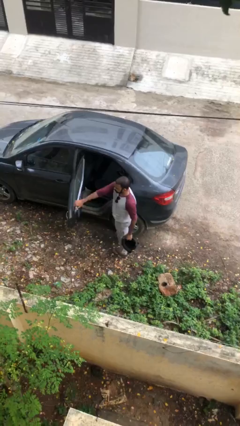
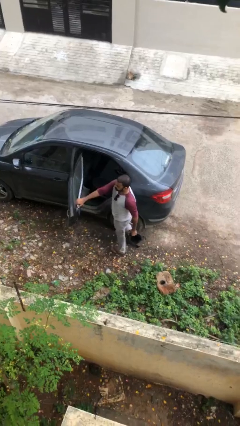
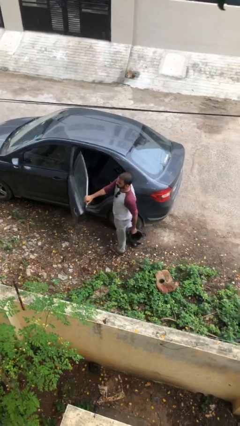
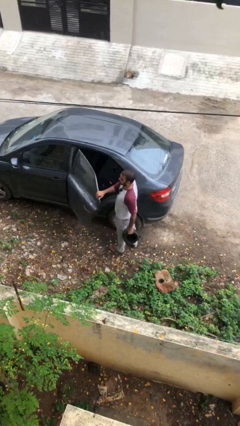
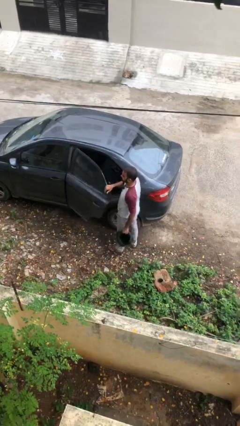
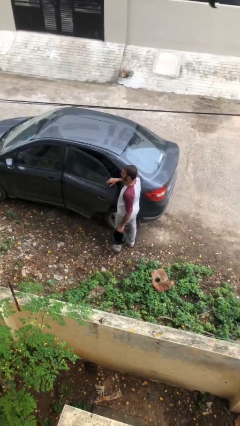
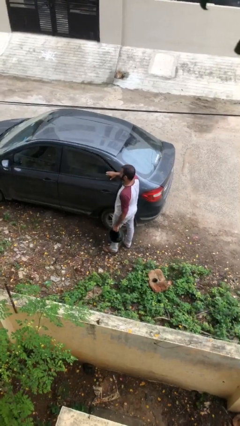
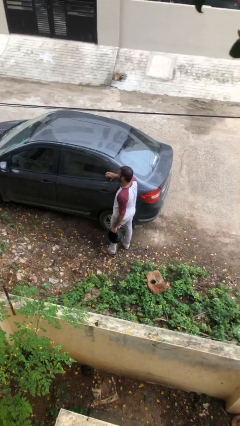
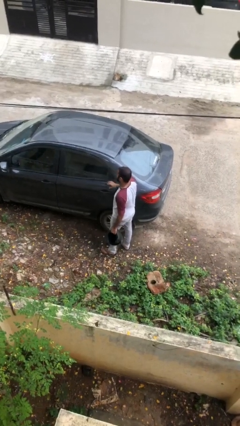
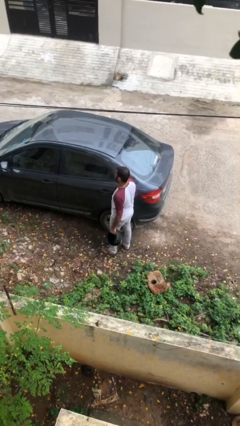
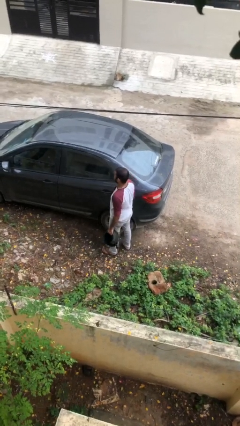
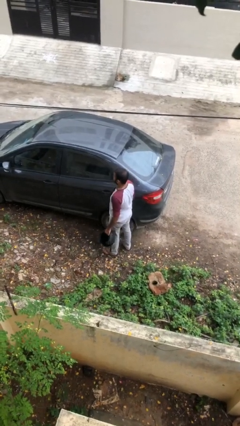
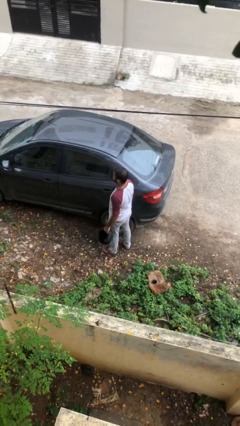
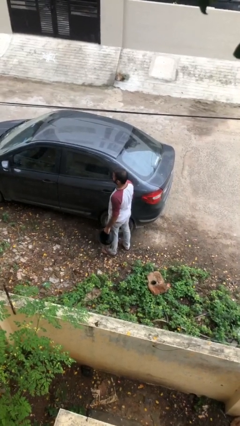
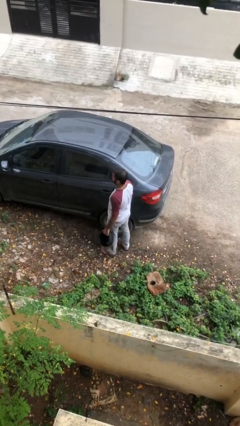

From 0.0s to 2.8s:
person closes car door

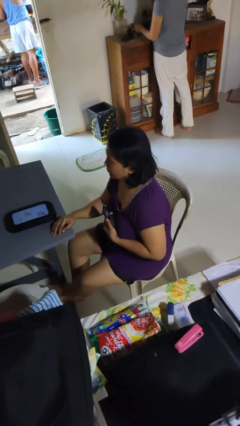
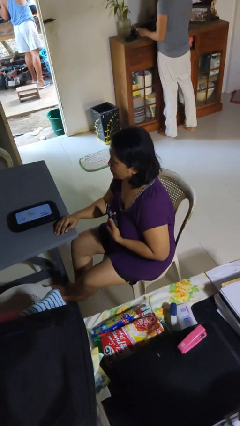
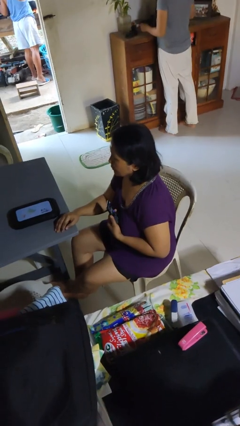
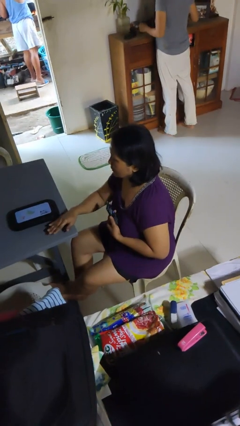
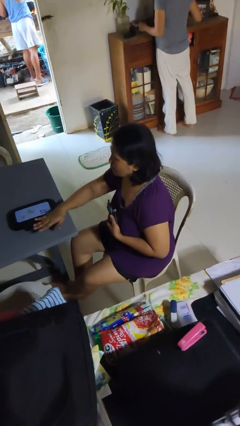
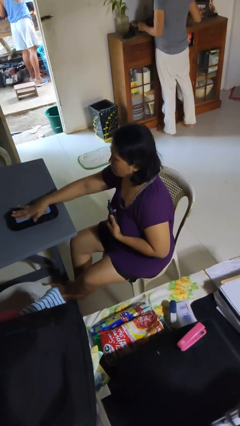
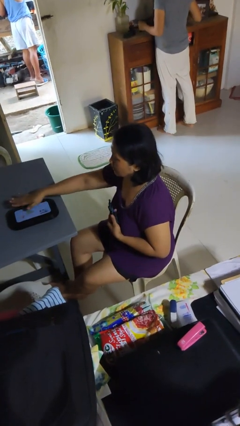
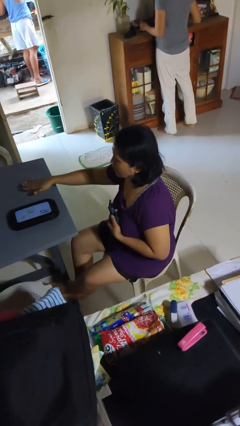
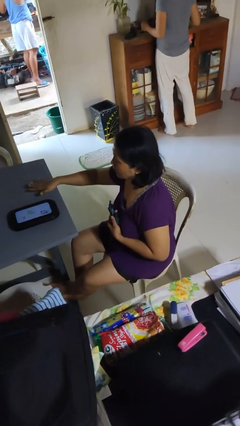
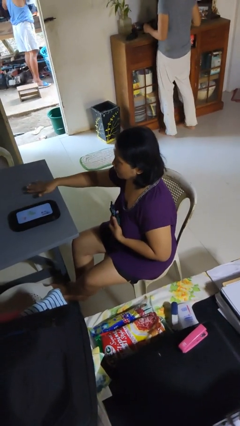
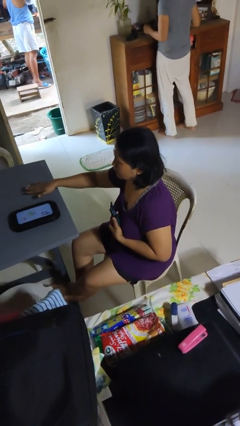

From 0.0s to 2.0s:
person waves hand over object

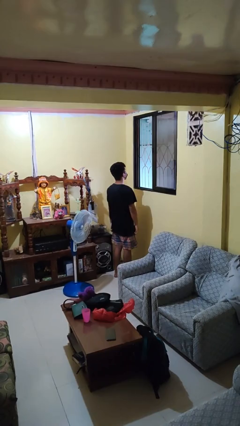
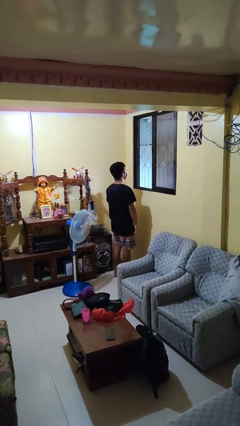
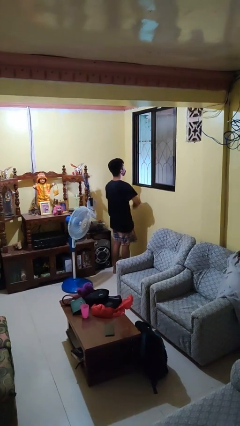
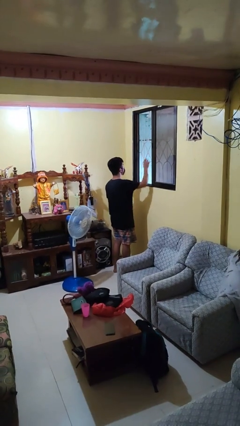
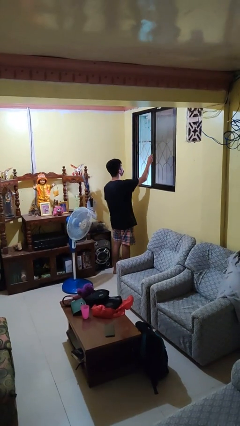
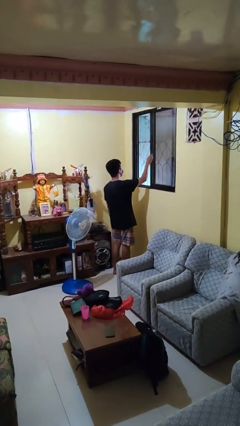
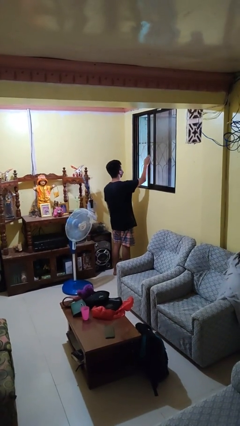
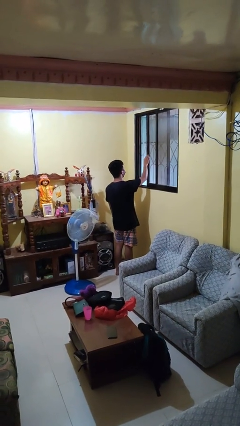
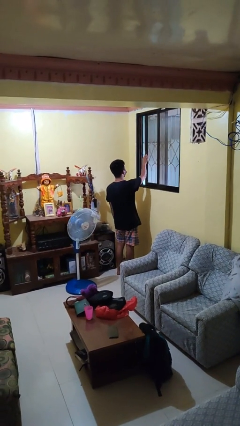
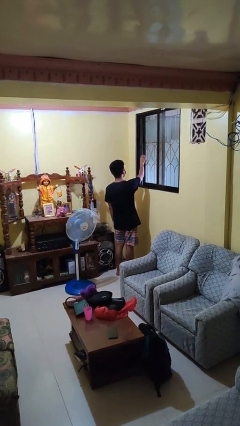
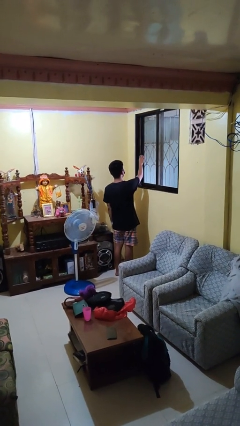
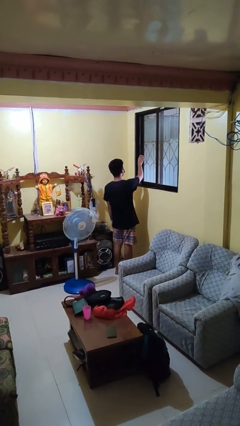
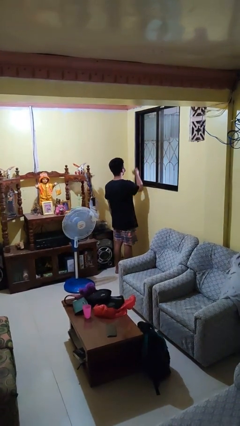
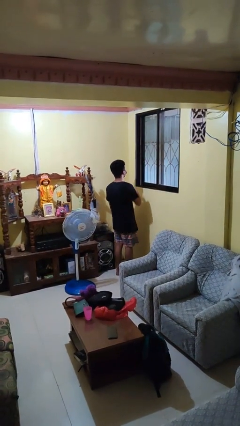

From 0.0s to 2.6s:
person closes home window

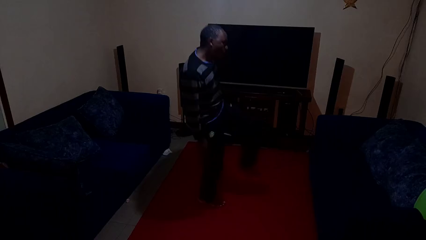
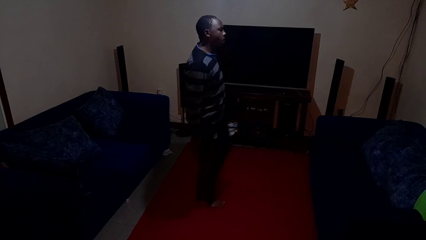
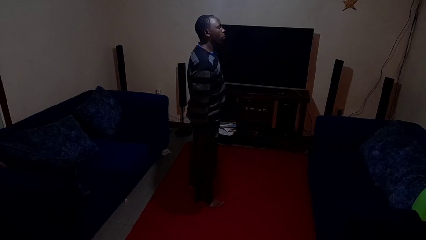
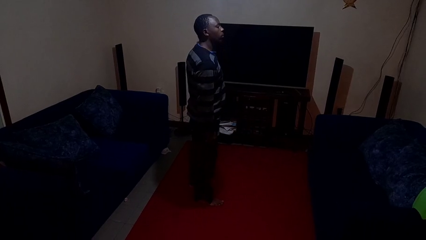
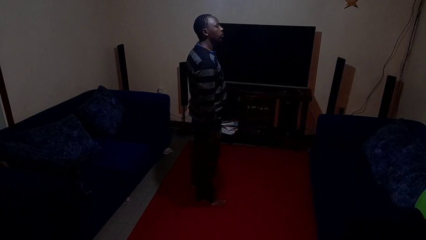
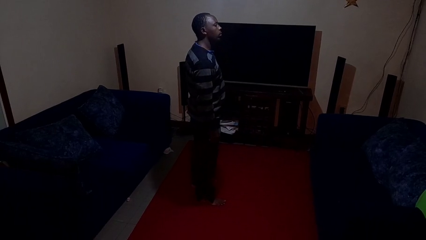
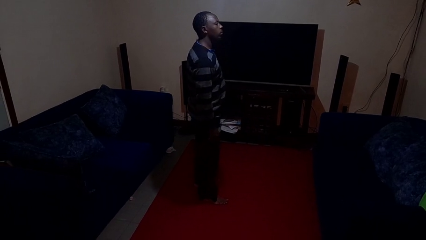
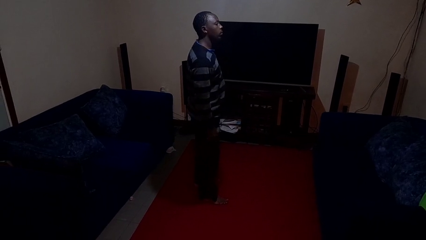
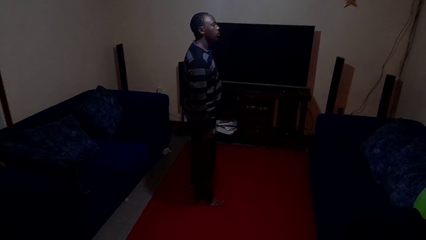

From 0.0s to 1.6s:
person crosses arms

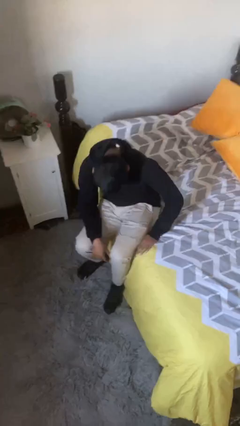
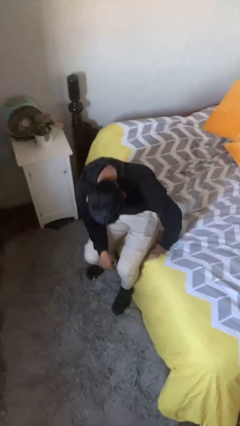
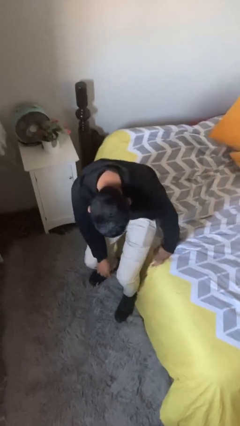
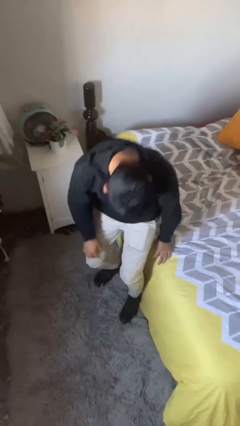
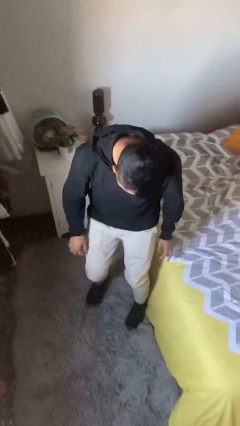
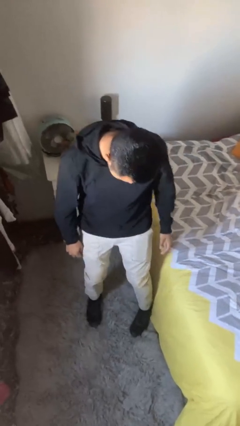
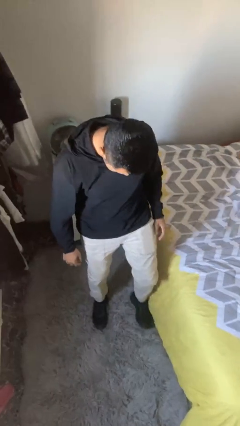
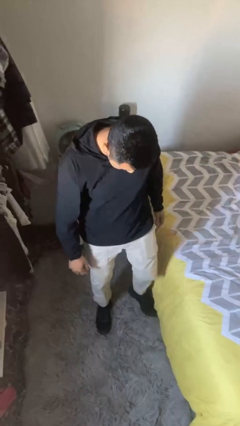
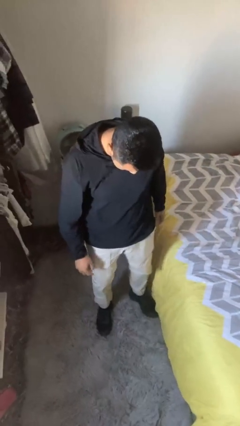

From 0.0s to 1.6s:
person stands up

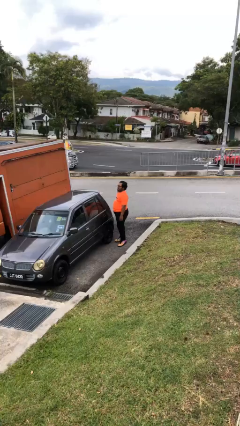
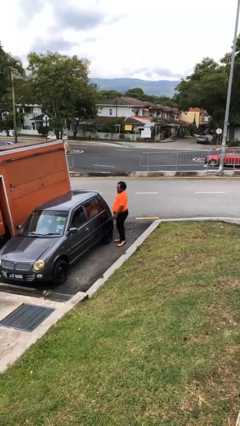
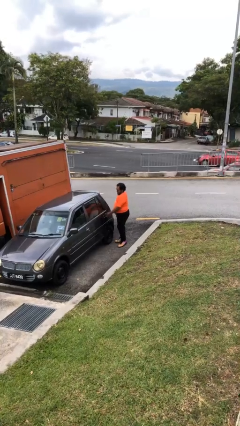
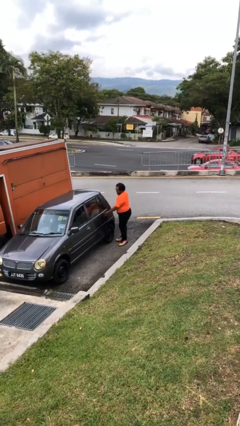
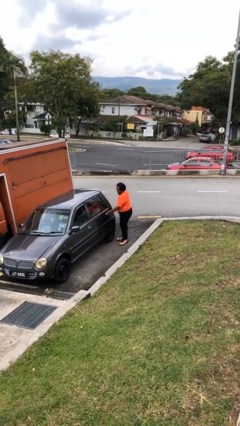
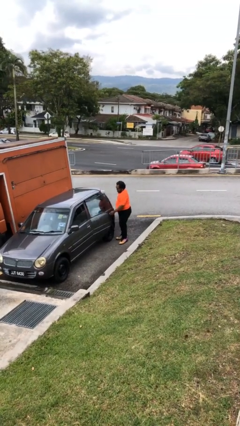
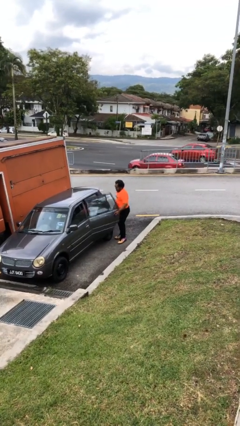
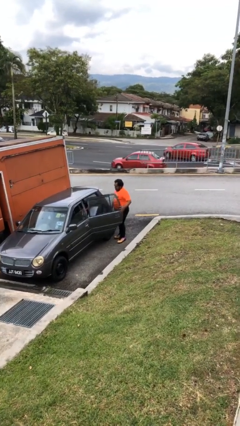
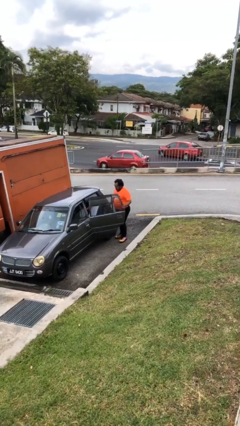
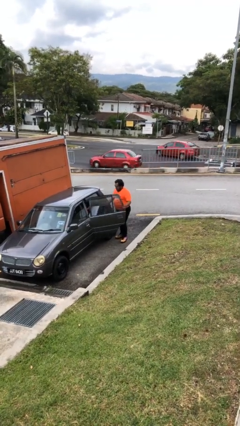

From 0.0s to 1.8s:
person opens car door

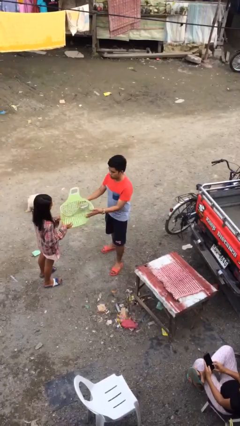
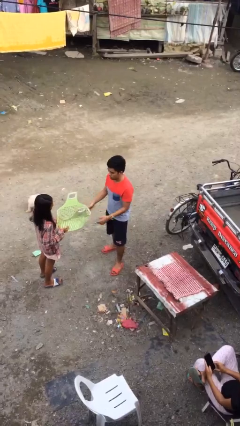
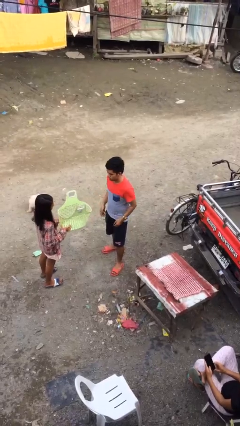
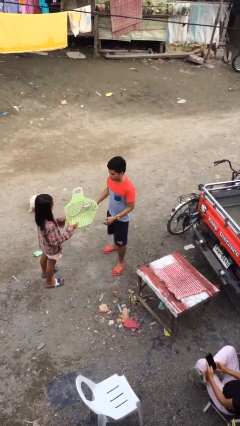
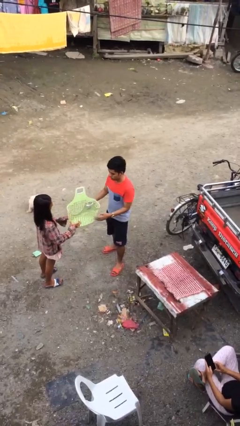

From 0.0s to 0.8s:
person transfers object to person

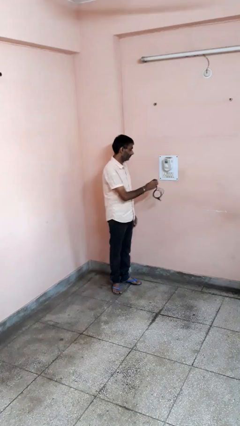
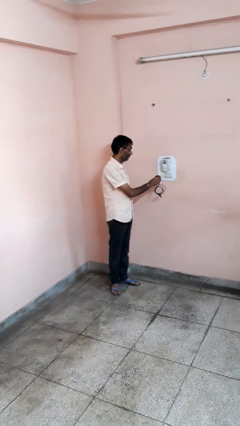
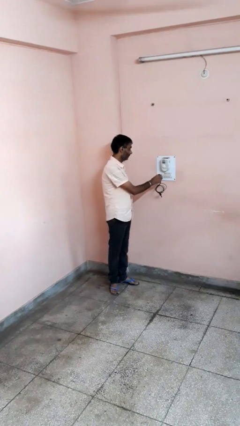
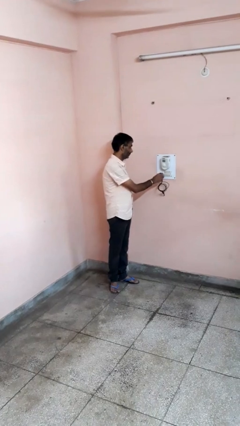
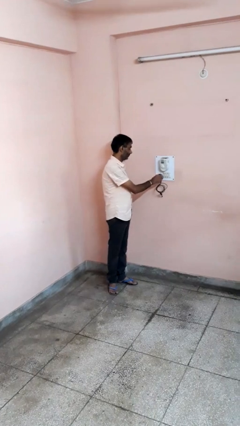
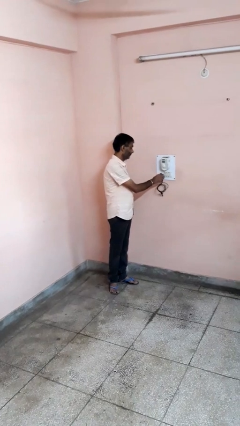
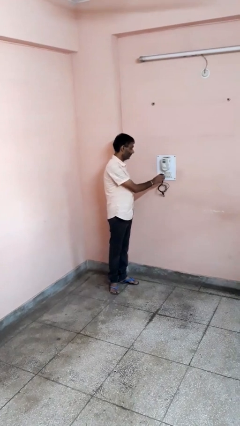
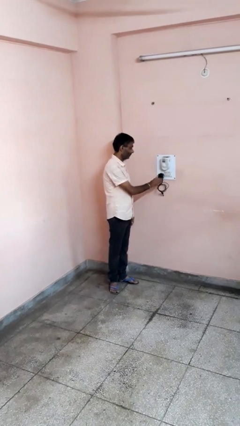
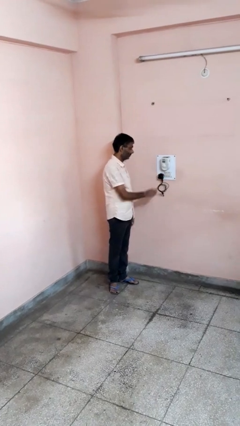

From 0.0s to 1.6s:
person plugs into electrical socket

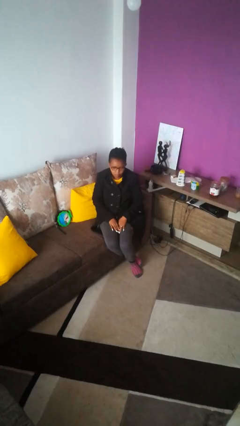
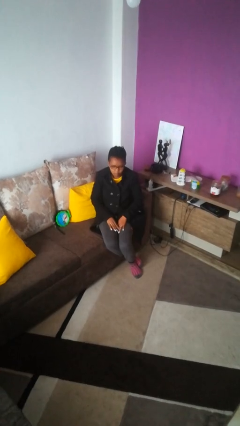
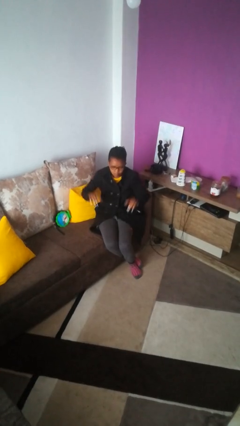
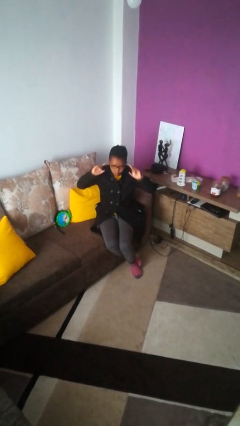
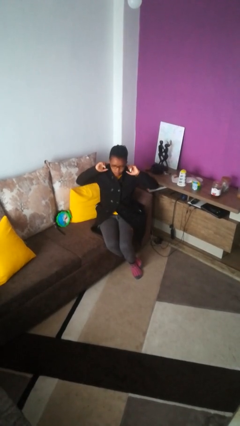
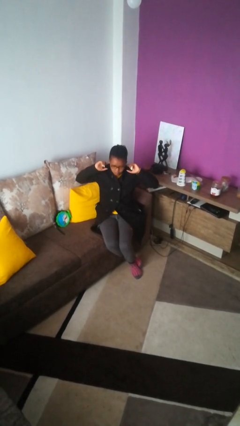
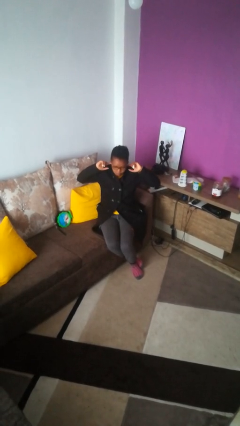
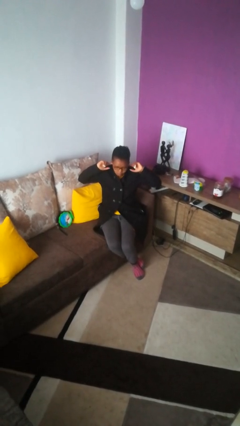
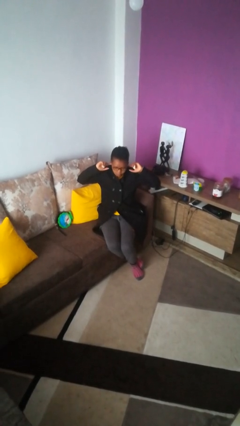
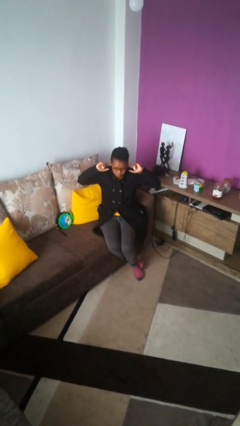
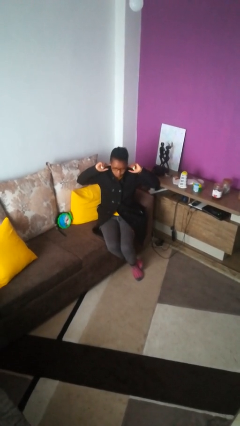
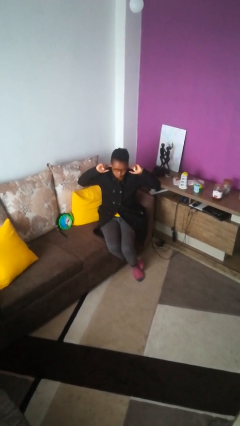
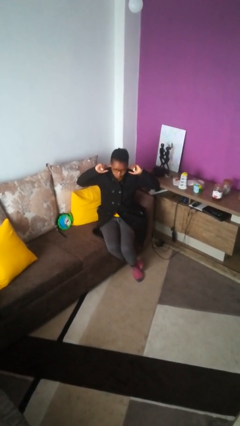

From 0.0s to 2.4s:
person puts fingers in ear
